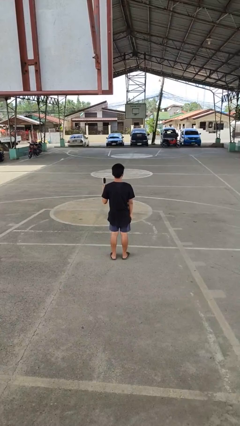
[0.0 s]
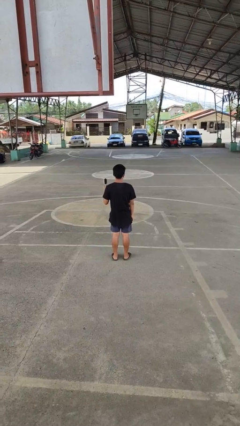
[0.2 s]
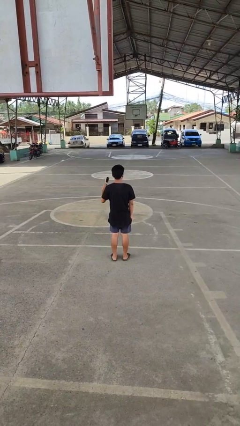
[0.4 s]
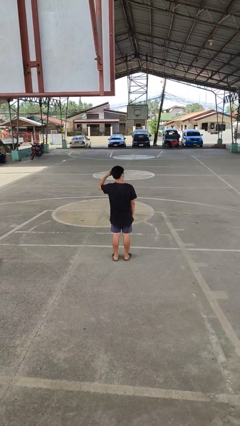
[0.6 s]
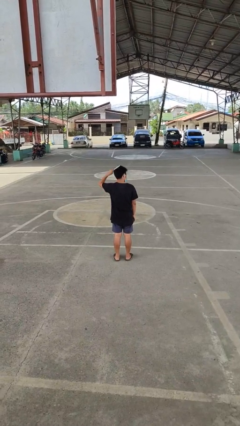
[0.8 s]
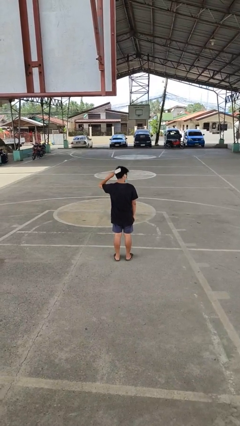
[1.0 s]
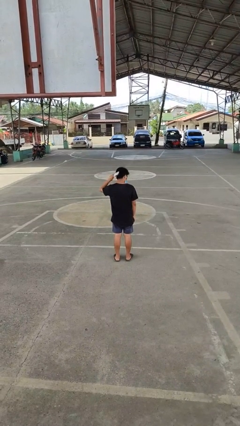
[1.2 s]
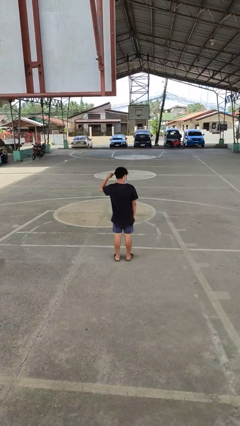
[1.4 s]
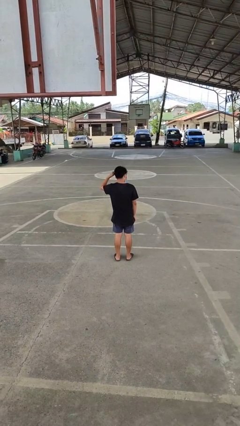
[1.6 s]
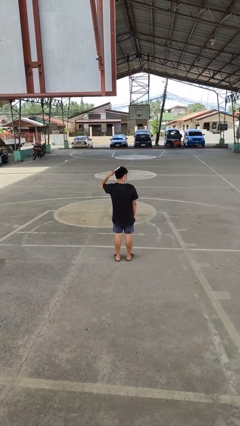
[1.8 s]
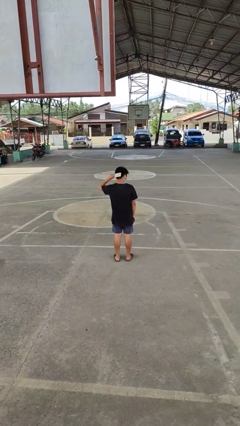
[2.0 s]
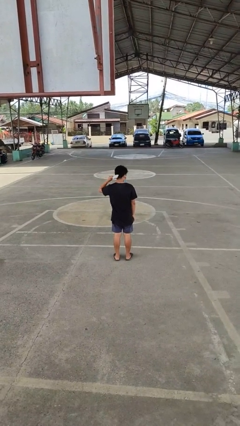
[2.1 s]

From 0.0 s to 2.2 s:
person brushes hair

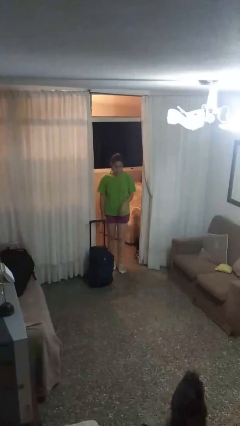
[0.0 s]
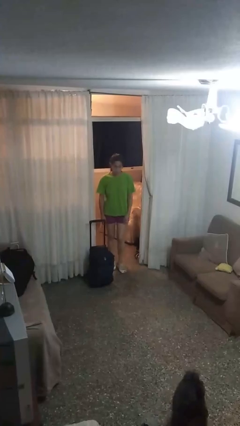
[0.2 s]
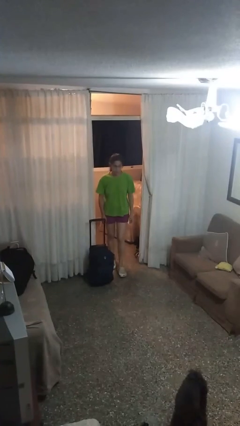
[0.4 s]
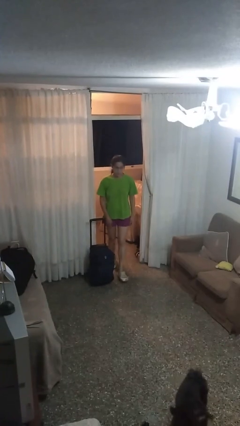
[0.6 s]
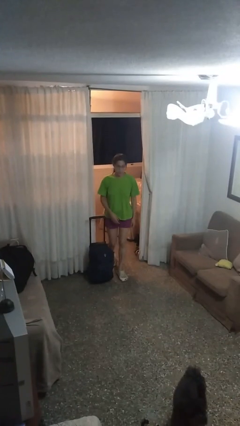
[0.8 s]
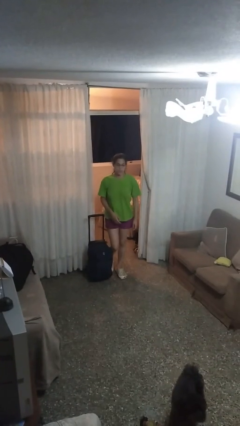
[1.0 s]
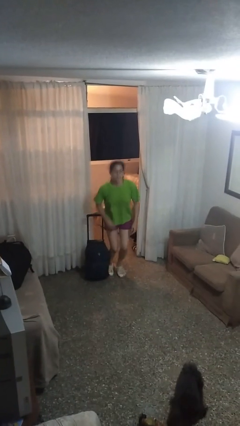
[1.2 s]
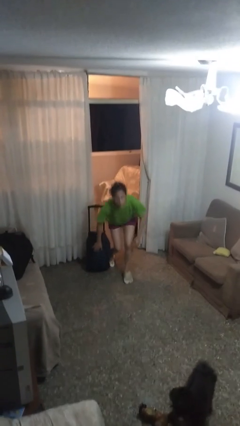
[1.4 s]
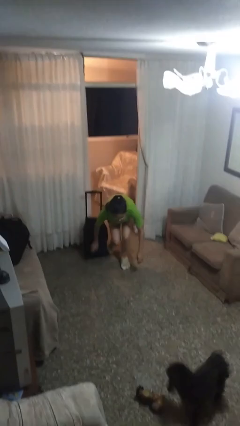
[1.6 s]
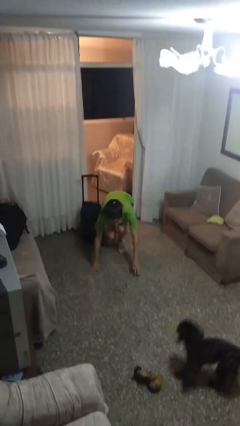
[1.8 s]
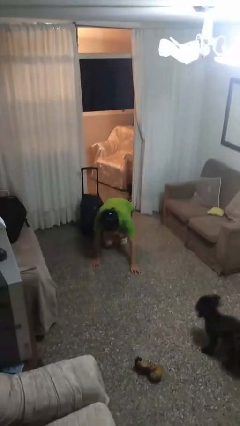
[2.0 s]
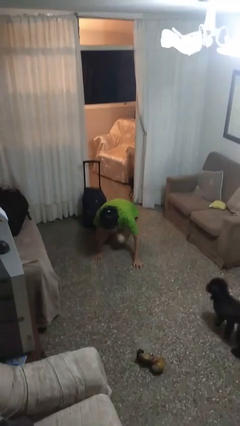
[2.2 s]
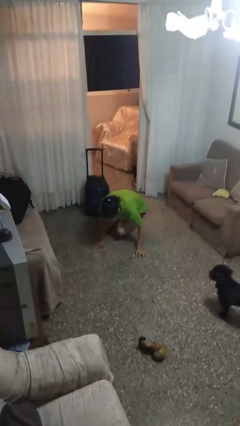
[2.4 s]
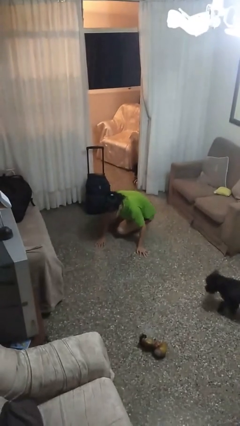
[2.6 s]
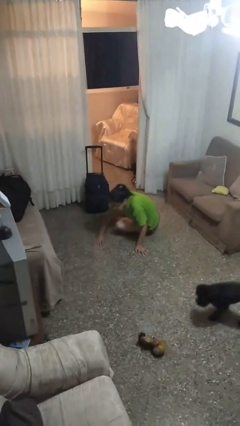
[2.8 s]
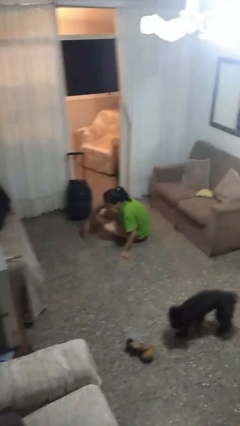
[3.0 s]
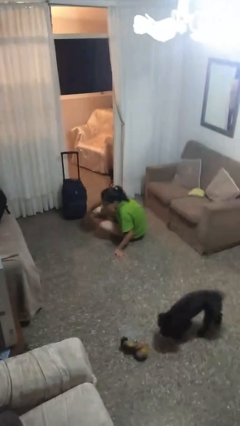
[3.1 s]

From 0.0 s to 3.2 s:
person trips on object on floor

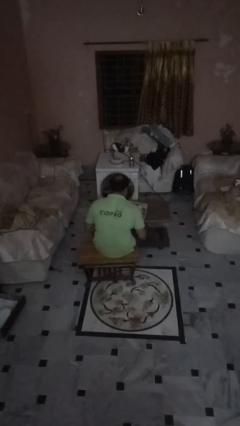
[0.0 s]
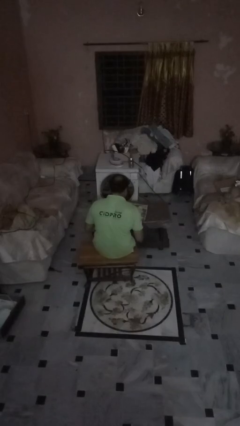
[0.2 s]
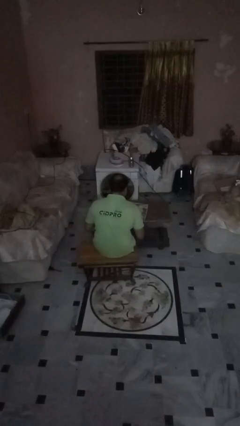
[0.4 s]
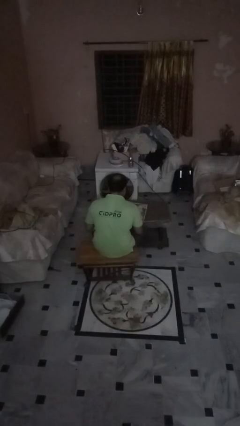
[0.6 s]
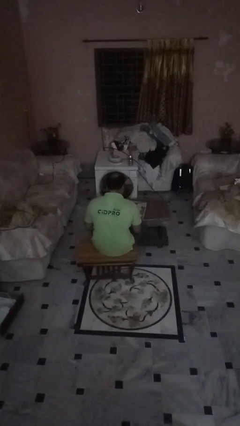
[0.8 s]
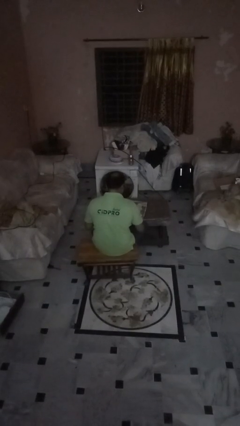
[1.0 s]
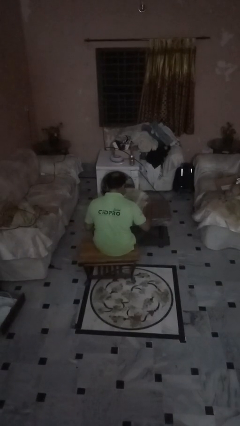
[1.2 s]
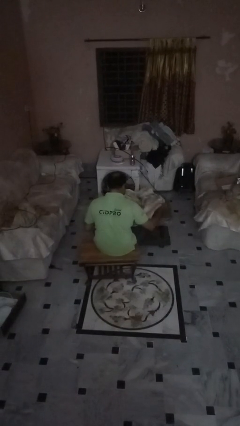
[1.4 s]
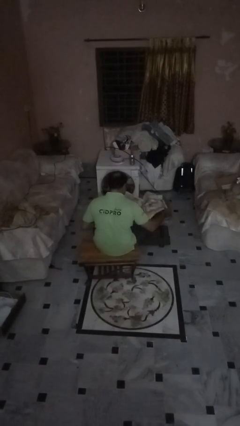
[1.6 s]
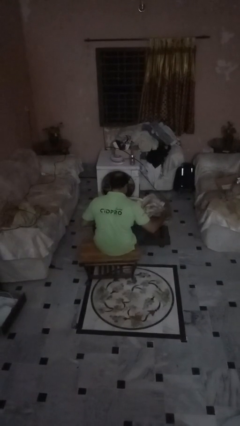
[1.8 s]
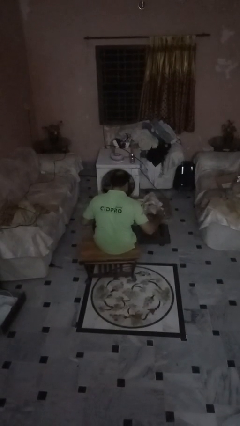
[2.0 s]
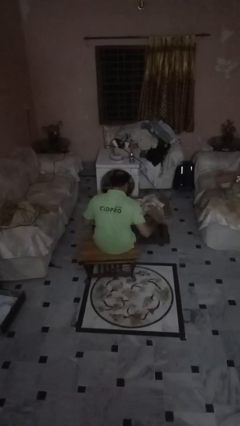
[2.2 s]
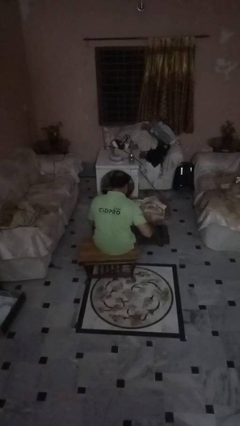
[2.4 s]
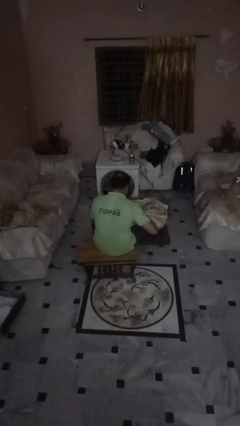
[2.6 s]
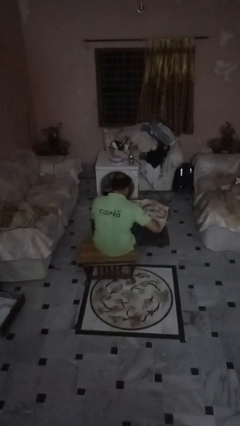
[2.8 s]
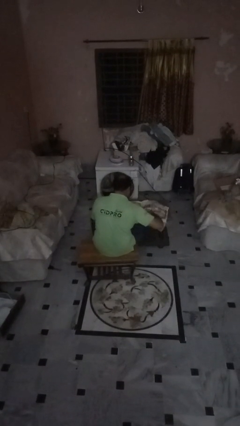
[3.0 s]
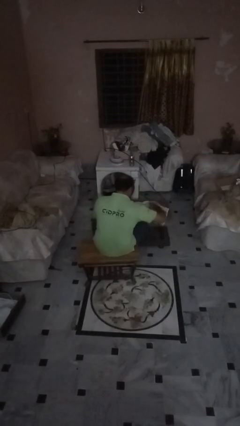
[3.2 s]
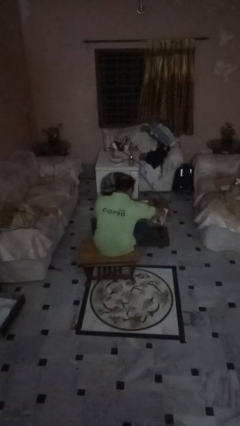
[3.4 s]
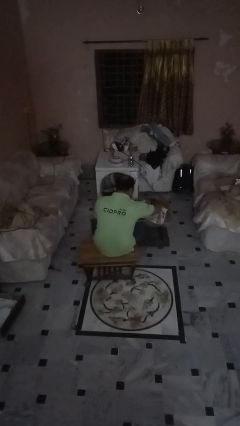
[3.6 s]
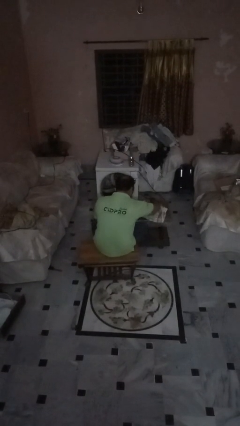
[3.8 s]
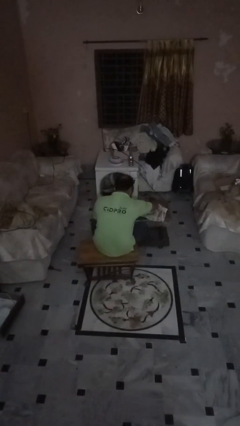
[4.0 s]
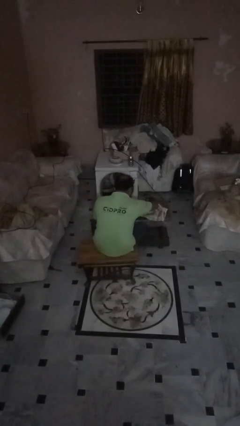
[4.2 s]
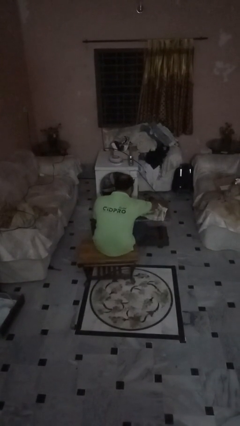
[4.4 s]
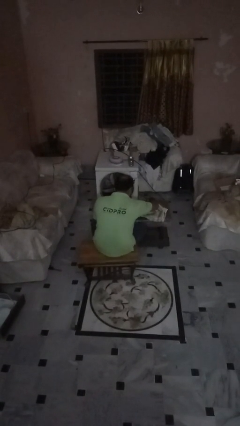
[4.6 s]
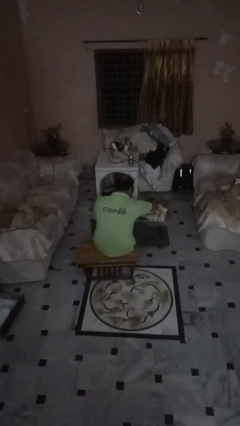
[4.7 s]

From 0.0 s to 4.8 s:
person tears paper

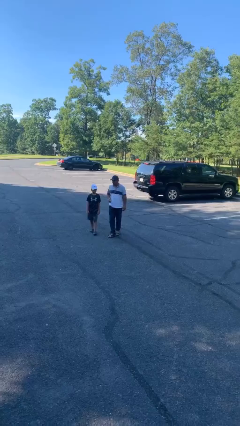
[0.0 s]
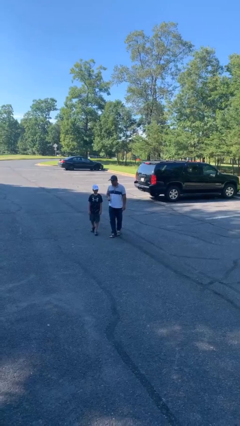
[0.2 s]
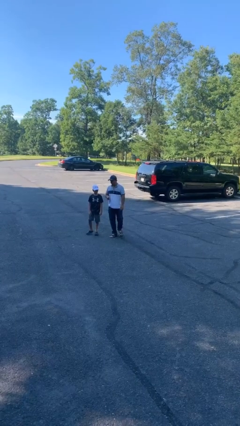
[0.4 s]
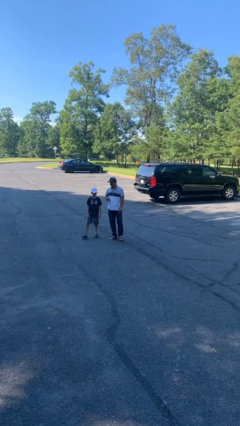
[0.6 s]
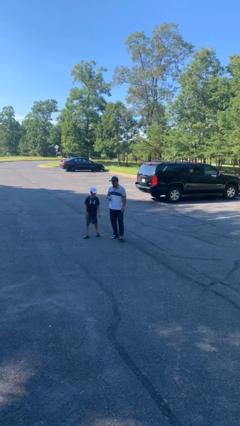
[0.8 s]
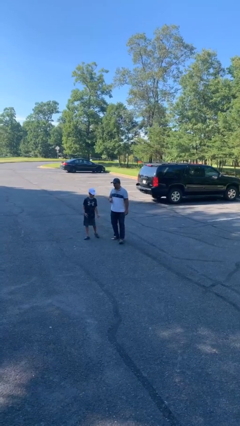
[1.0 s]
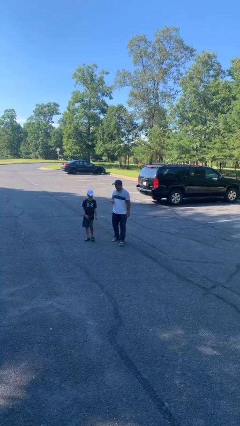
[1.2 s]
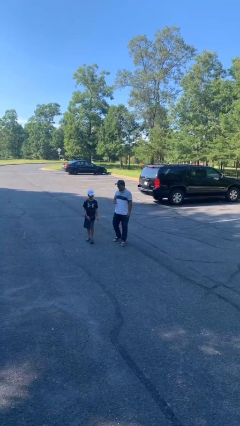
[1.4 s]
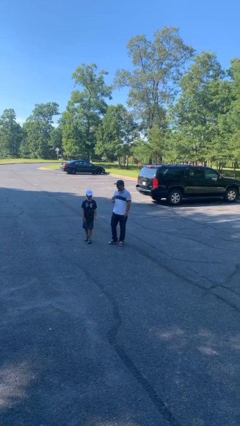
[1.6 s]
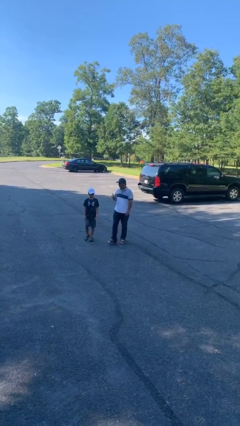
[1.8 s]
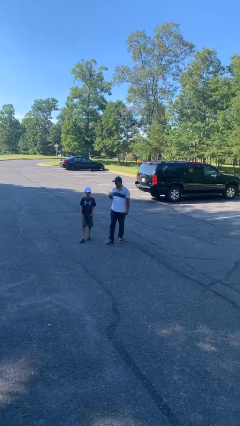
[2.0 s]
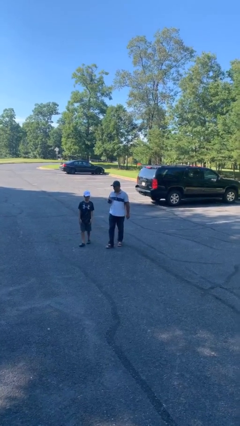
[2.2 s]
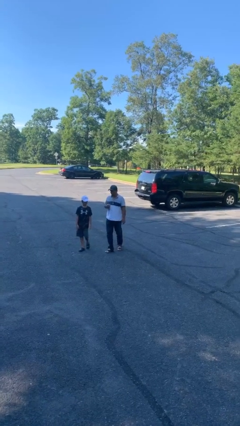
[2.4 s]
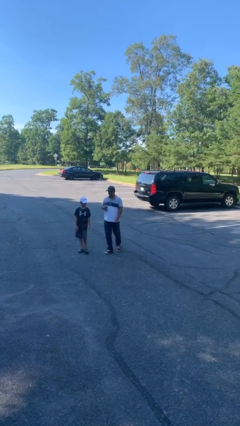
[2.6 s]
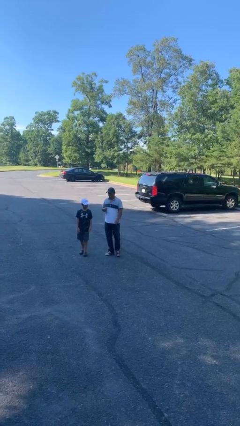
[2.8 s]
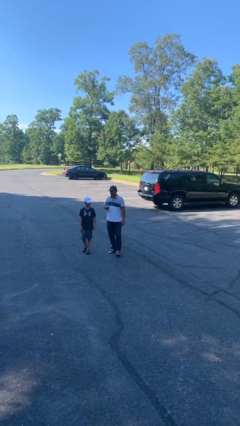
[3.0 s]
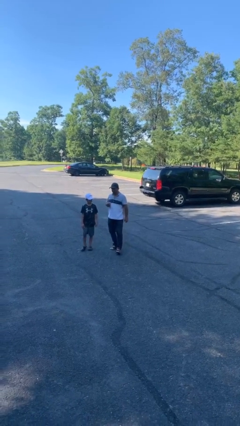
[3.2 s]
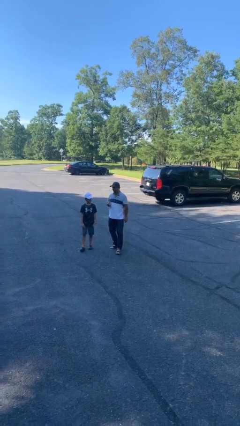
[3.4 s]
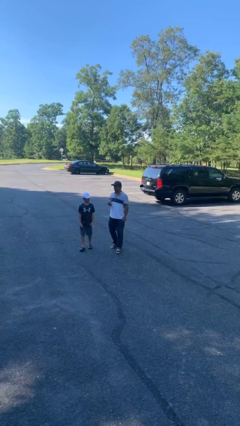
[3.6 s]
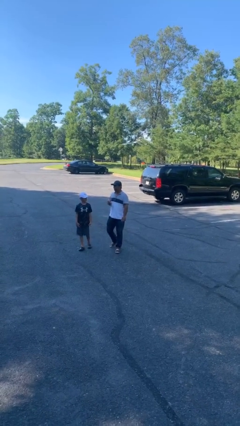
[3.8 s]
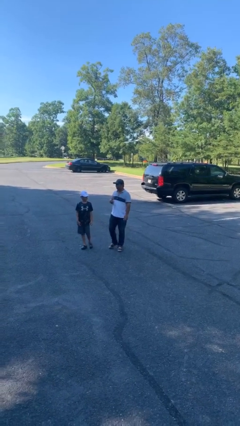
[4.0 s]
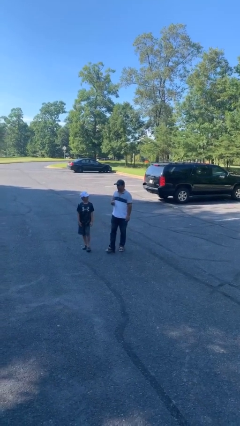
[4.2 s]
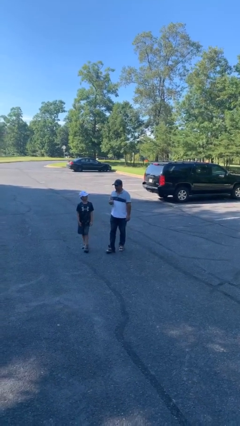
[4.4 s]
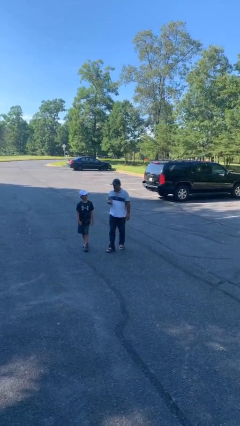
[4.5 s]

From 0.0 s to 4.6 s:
person talks to person

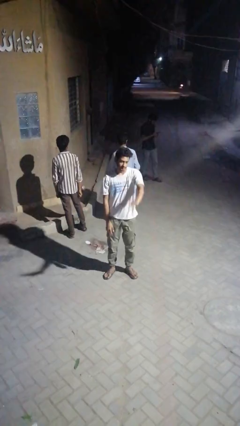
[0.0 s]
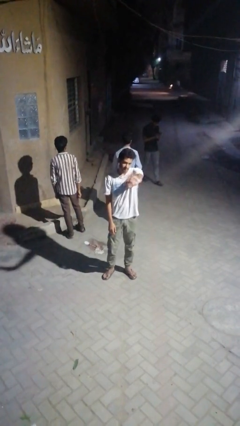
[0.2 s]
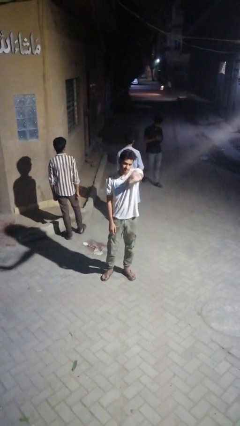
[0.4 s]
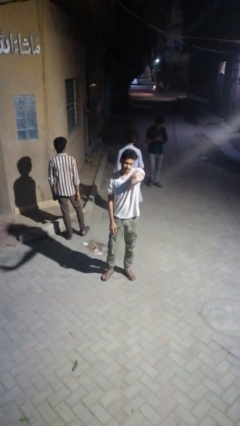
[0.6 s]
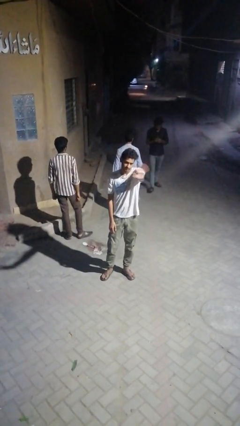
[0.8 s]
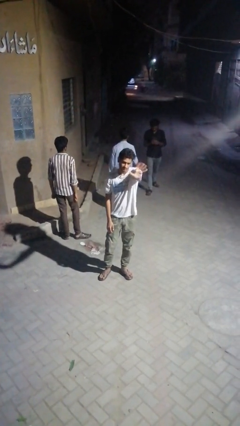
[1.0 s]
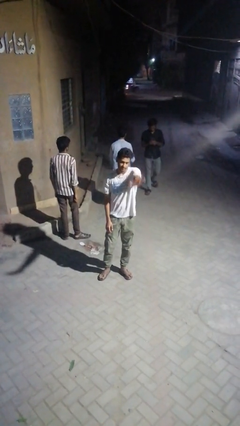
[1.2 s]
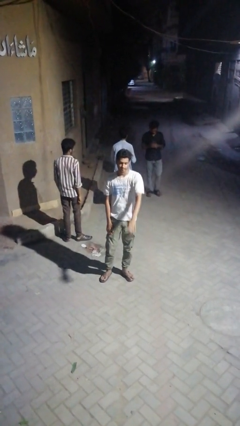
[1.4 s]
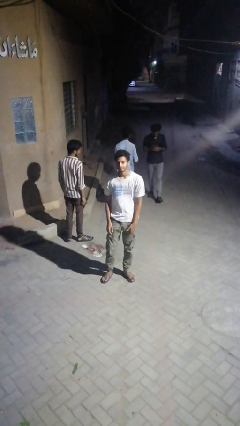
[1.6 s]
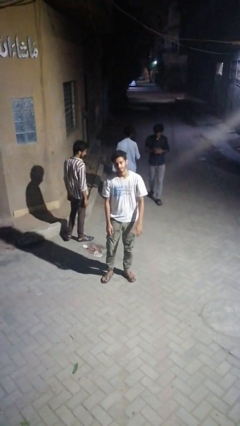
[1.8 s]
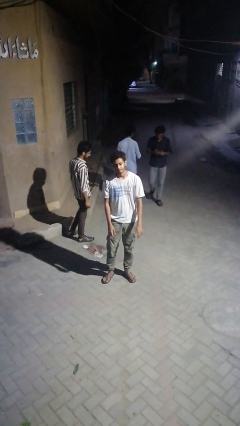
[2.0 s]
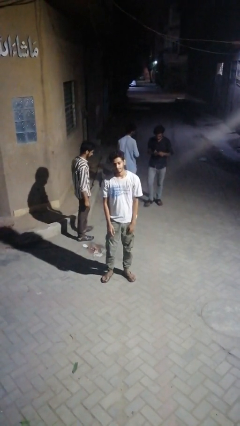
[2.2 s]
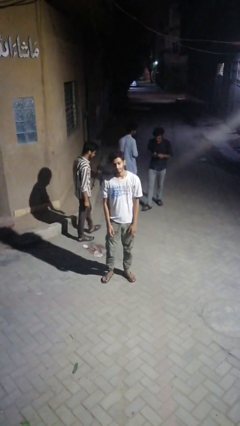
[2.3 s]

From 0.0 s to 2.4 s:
person waves at person

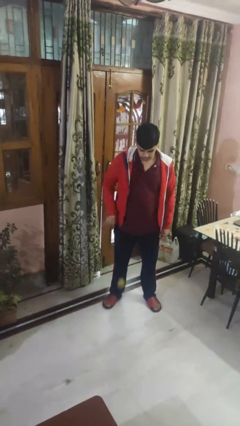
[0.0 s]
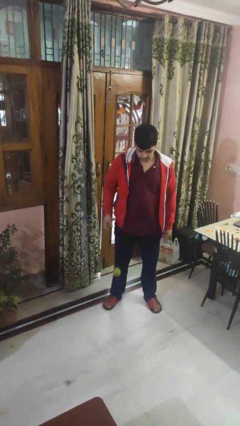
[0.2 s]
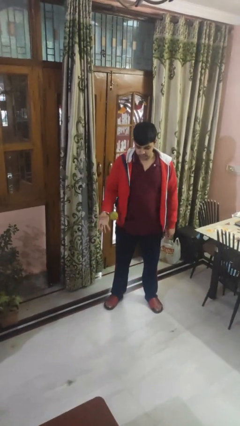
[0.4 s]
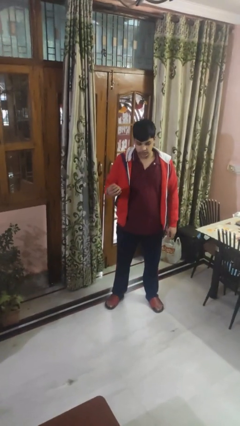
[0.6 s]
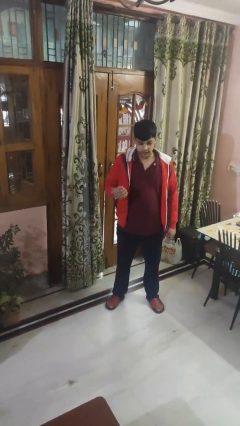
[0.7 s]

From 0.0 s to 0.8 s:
person bounces ball on floor
